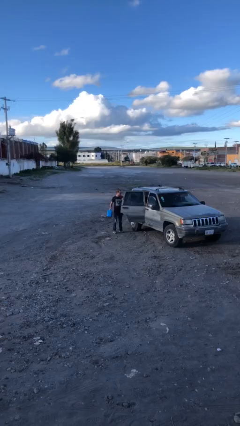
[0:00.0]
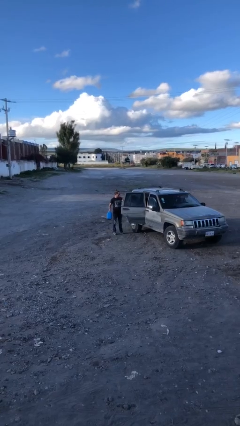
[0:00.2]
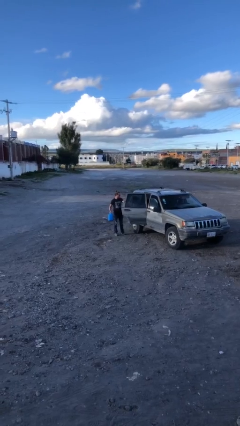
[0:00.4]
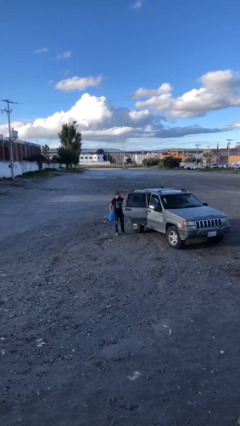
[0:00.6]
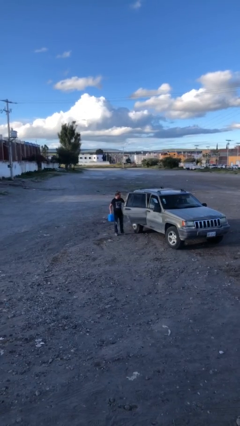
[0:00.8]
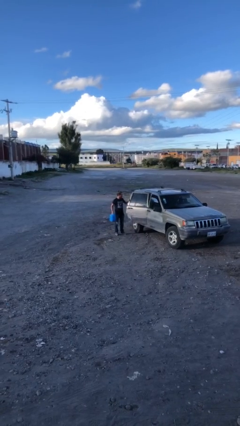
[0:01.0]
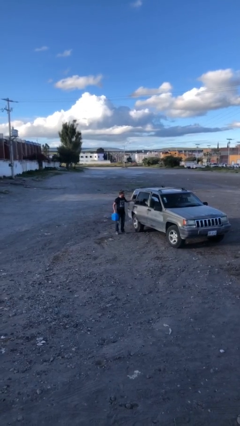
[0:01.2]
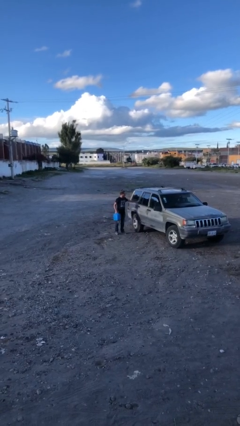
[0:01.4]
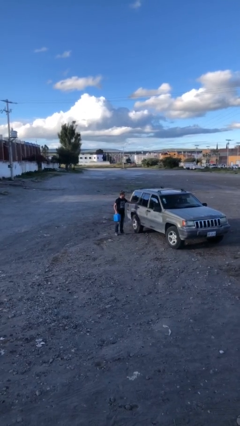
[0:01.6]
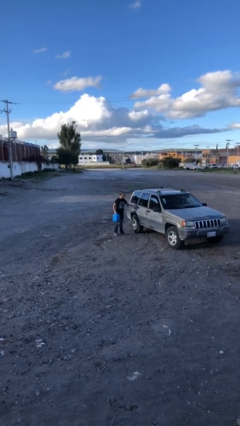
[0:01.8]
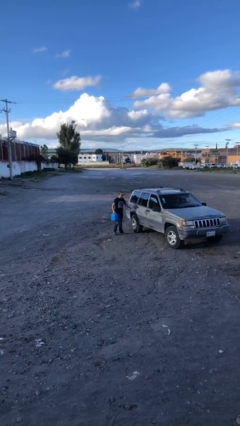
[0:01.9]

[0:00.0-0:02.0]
person closes car door

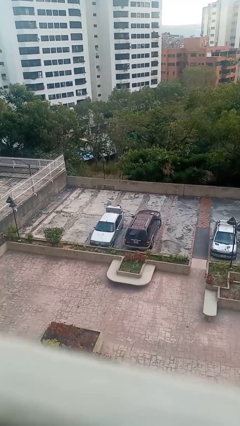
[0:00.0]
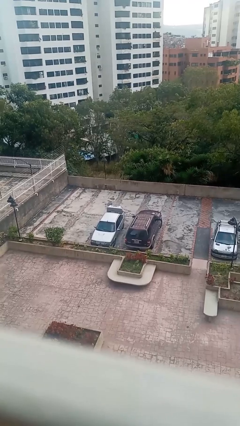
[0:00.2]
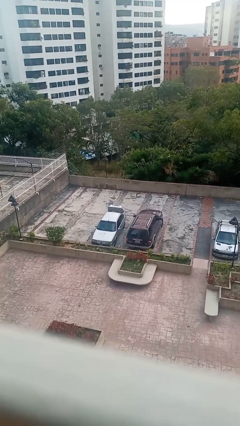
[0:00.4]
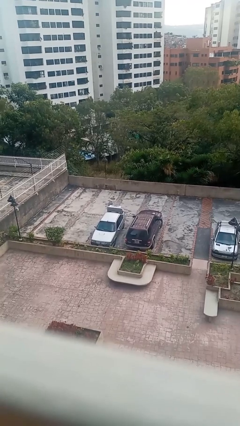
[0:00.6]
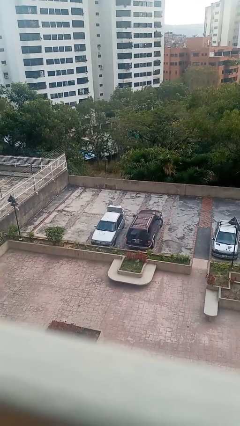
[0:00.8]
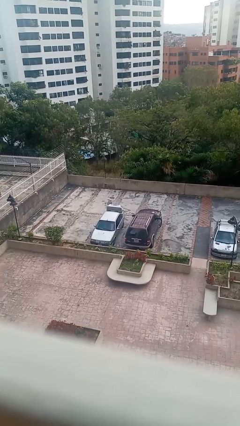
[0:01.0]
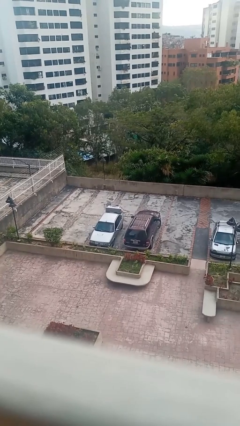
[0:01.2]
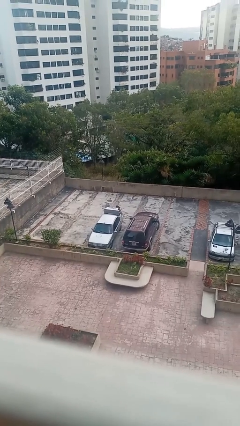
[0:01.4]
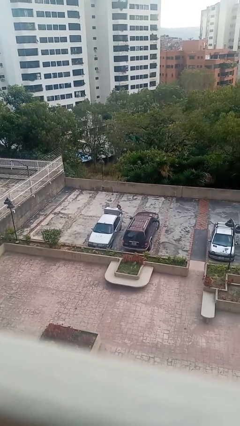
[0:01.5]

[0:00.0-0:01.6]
person unloads car

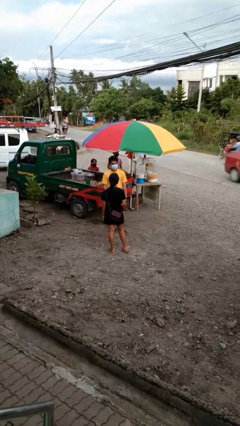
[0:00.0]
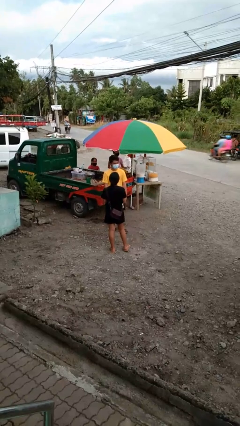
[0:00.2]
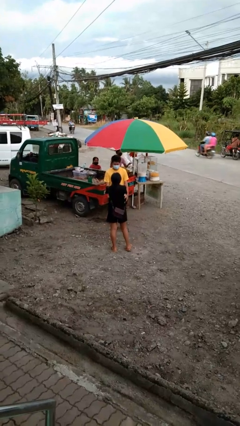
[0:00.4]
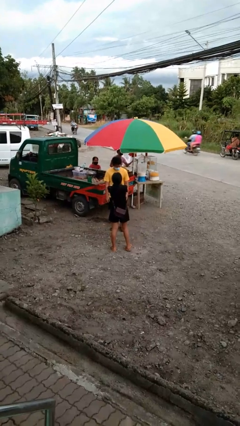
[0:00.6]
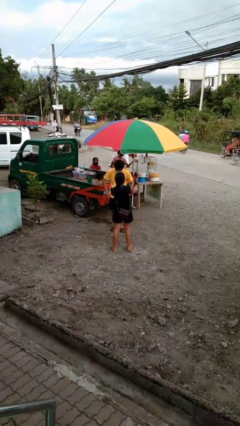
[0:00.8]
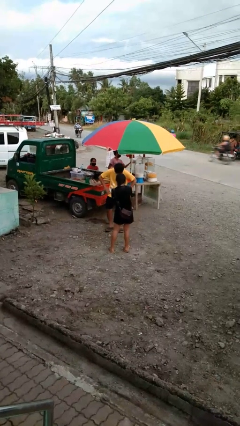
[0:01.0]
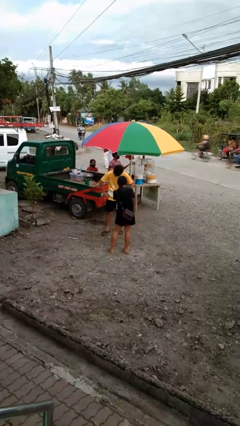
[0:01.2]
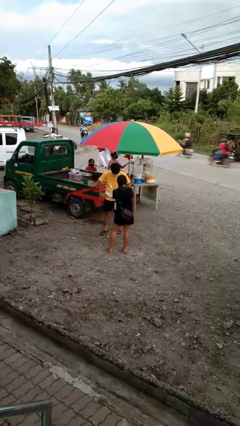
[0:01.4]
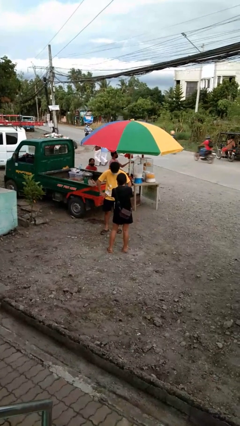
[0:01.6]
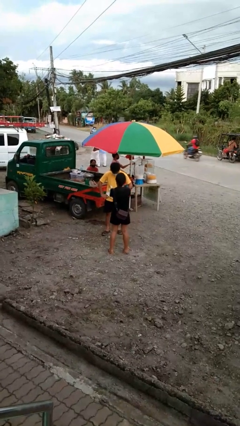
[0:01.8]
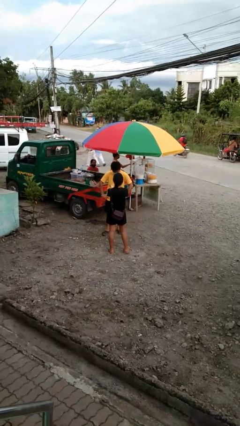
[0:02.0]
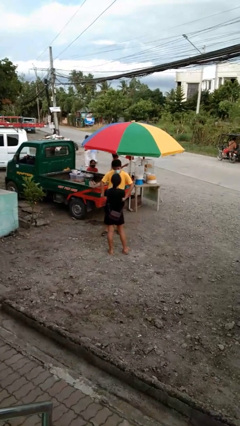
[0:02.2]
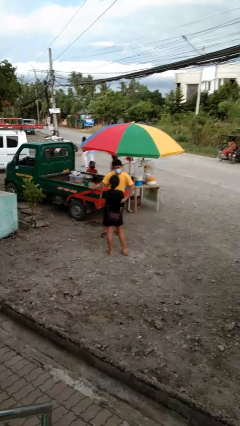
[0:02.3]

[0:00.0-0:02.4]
person laughs with person

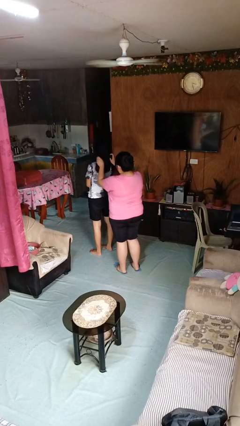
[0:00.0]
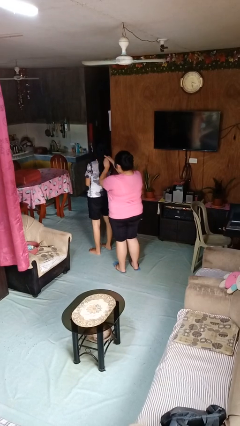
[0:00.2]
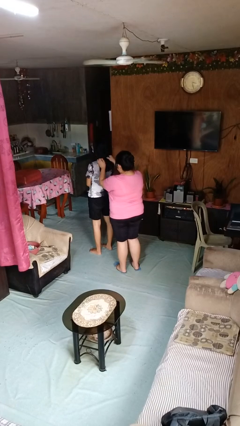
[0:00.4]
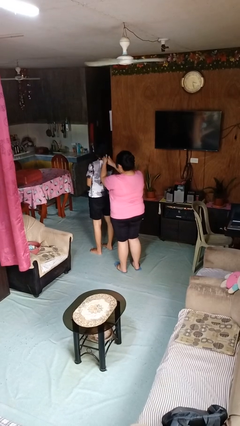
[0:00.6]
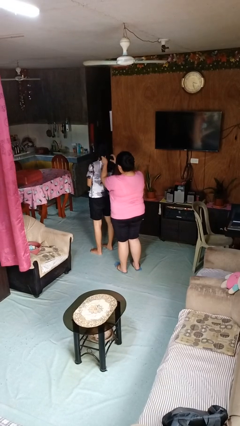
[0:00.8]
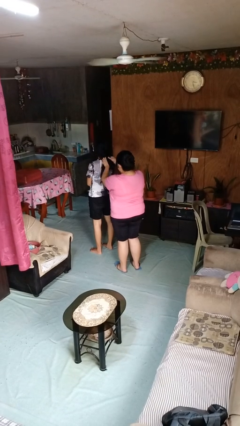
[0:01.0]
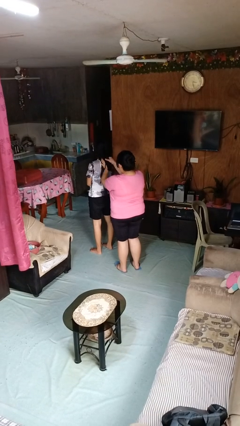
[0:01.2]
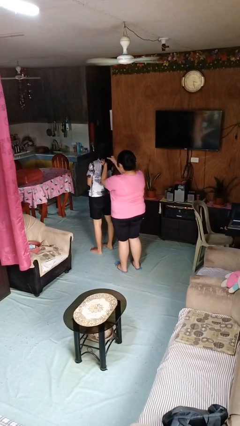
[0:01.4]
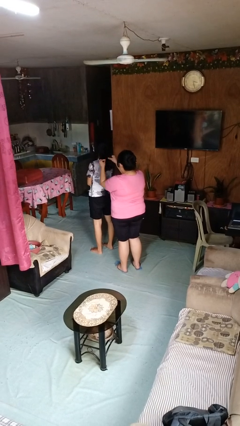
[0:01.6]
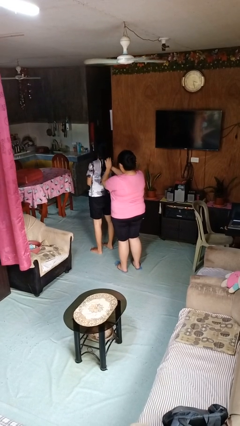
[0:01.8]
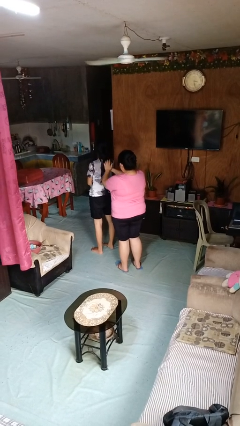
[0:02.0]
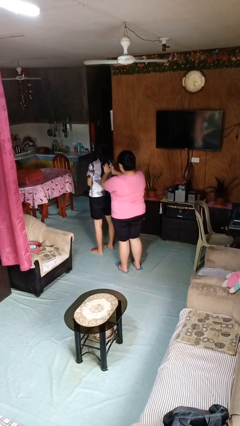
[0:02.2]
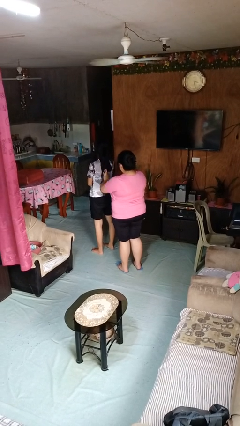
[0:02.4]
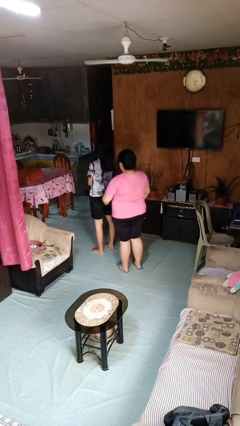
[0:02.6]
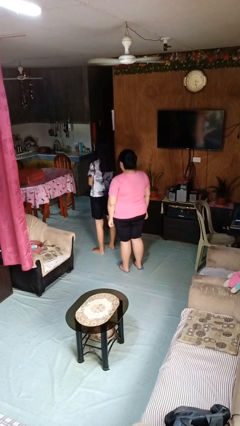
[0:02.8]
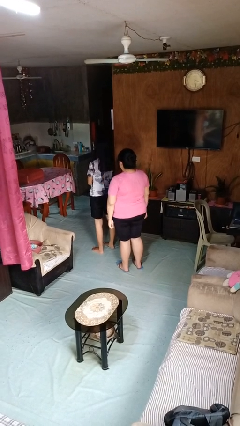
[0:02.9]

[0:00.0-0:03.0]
person braids hair of person

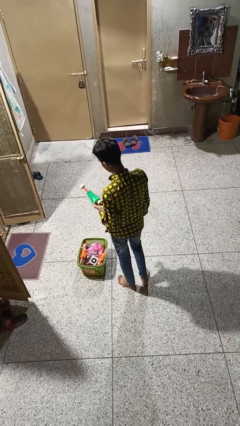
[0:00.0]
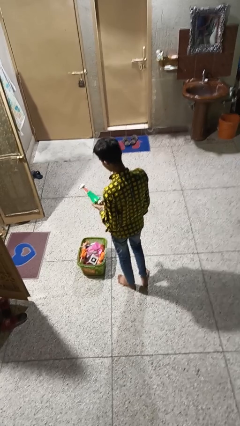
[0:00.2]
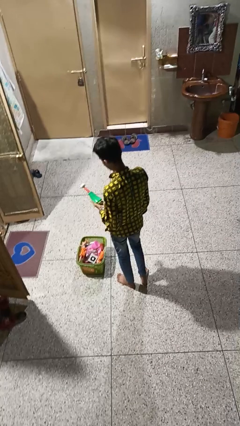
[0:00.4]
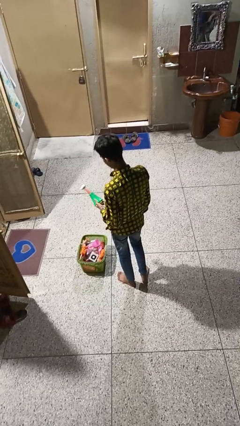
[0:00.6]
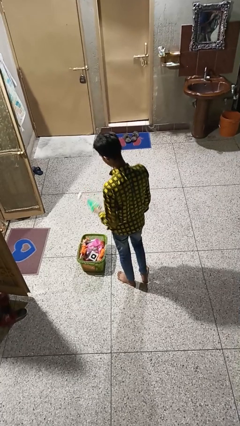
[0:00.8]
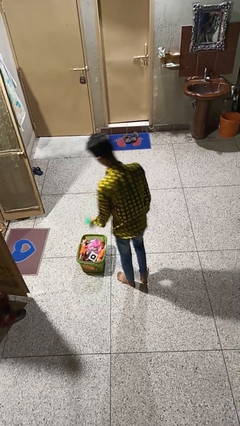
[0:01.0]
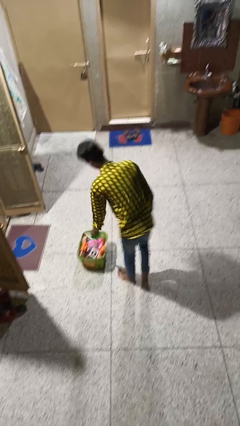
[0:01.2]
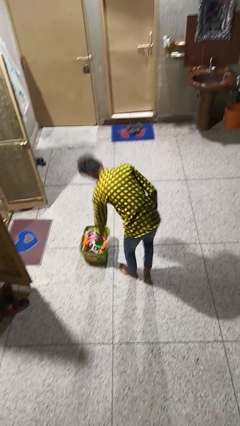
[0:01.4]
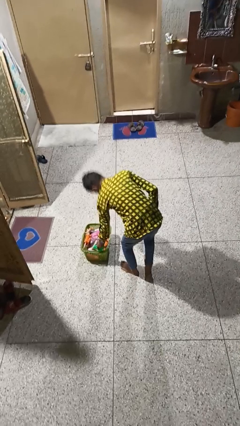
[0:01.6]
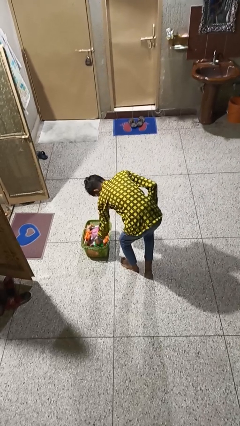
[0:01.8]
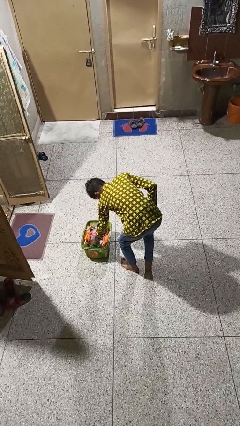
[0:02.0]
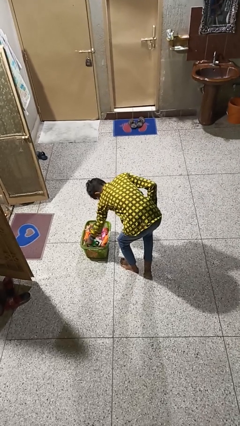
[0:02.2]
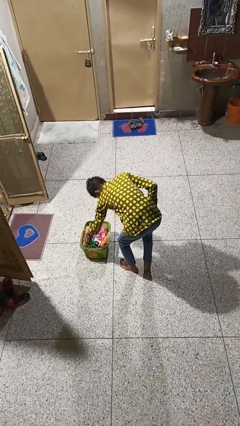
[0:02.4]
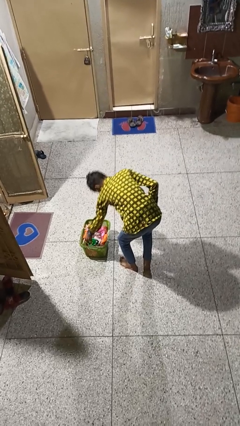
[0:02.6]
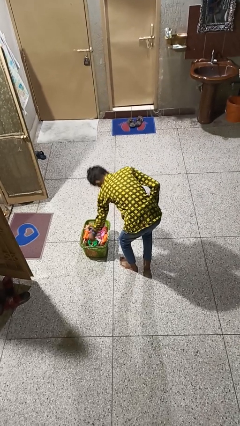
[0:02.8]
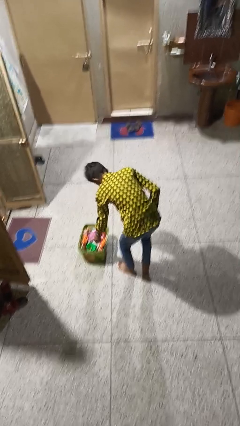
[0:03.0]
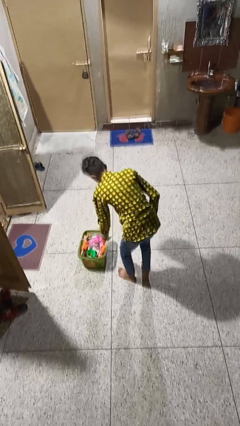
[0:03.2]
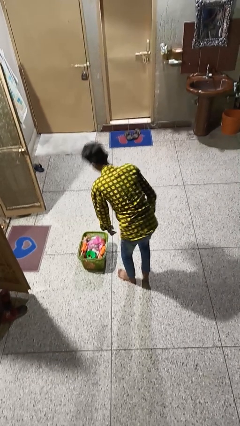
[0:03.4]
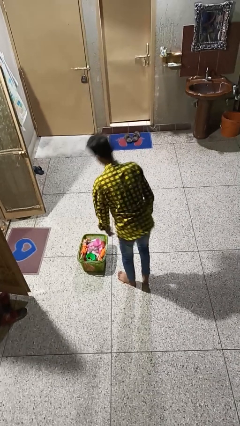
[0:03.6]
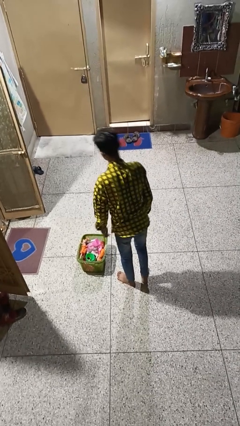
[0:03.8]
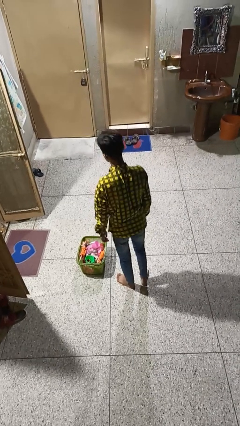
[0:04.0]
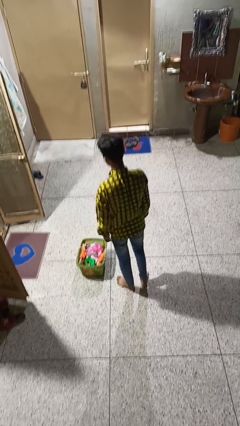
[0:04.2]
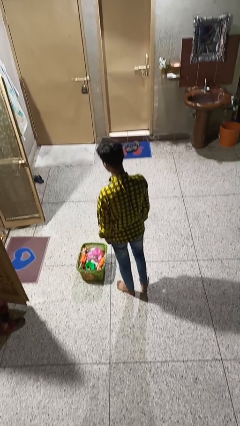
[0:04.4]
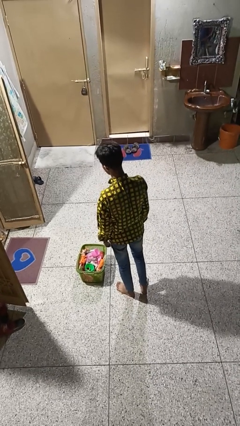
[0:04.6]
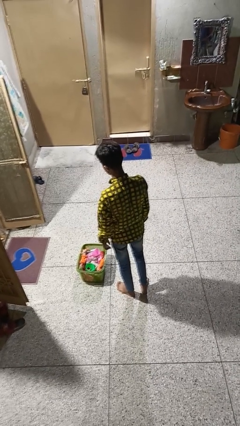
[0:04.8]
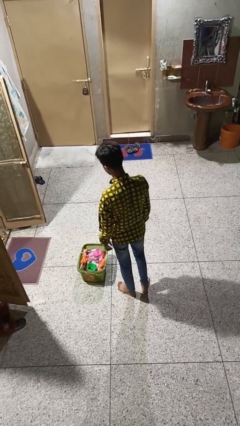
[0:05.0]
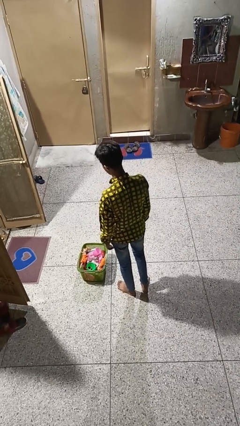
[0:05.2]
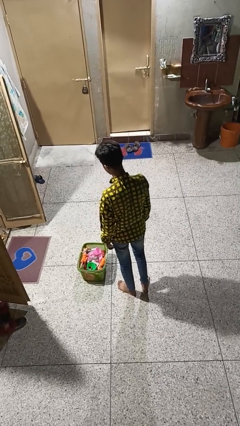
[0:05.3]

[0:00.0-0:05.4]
person takes object from basket

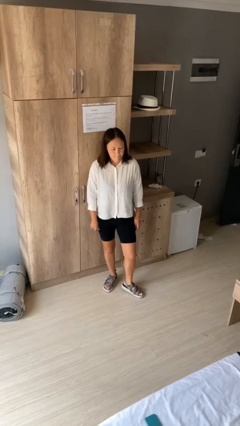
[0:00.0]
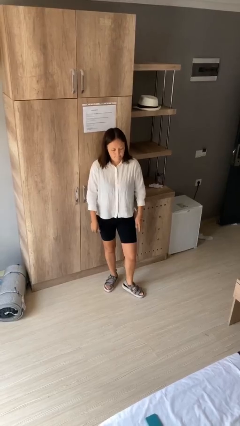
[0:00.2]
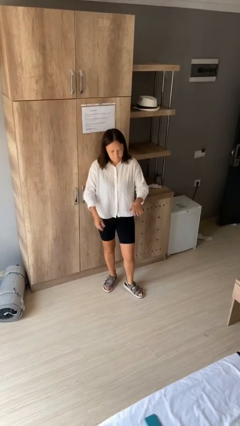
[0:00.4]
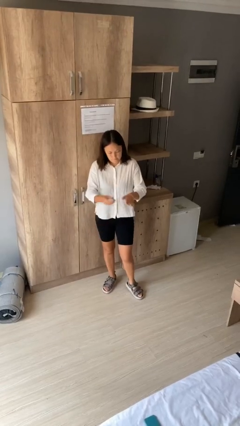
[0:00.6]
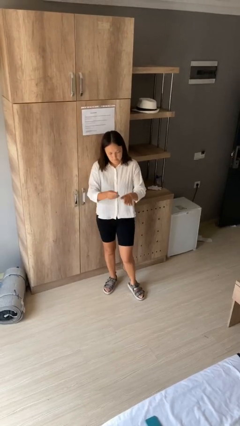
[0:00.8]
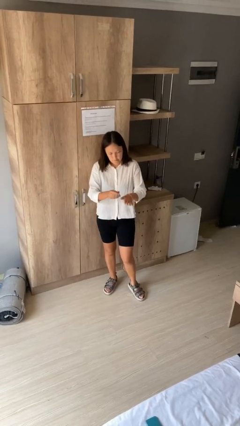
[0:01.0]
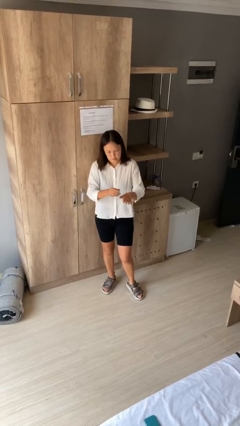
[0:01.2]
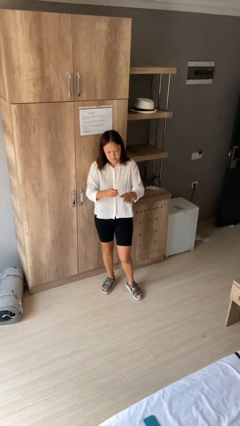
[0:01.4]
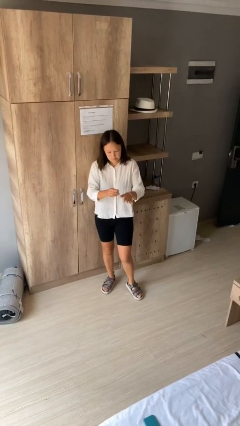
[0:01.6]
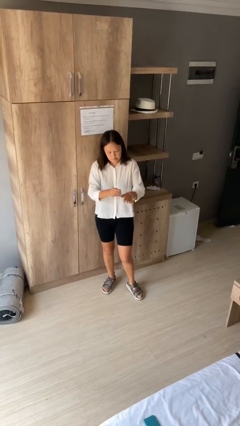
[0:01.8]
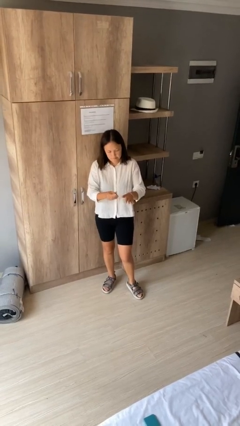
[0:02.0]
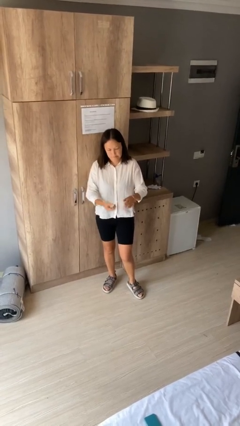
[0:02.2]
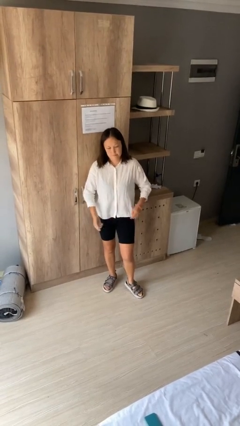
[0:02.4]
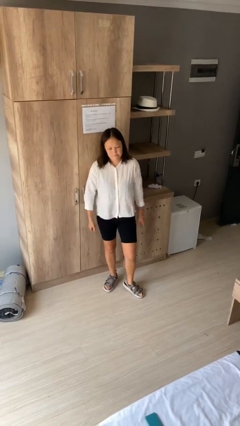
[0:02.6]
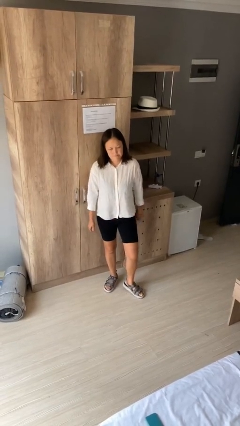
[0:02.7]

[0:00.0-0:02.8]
person clips fingernails
